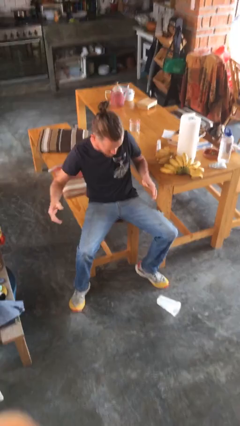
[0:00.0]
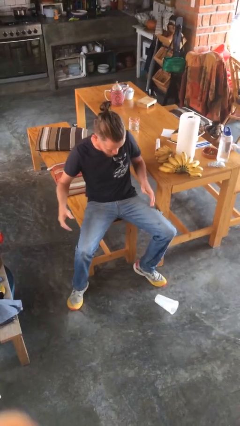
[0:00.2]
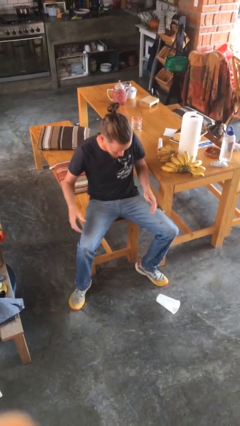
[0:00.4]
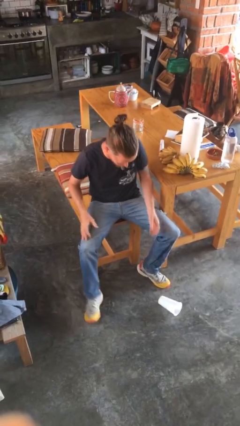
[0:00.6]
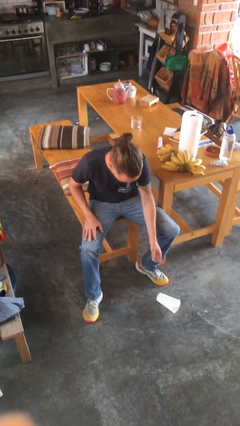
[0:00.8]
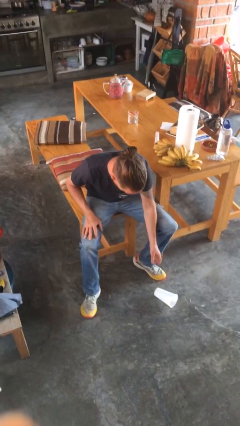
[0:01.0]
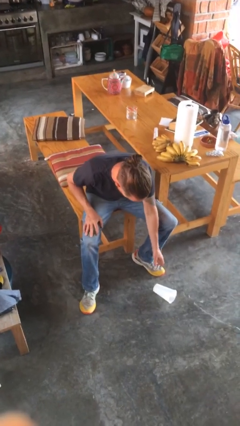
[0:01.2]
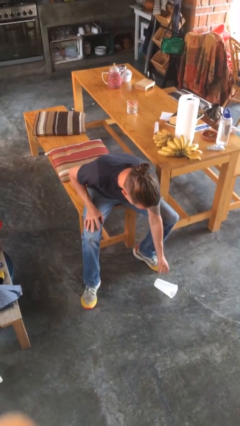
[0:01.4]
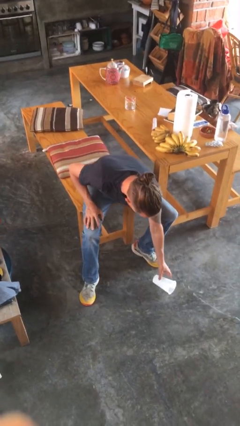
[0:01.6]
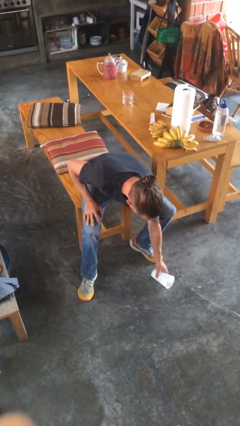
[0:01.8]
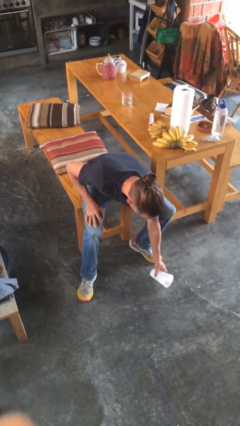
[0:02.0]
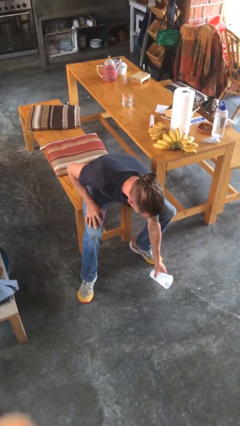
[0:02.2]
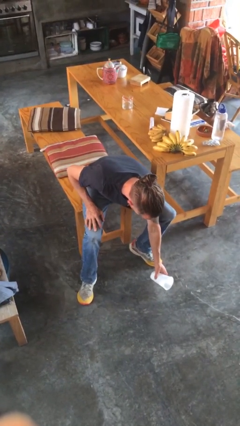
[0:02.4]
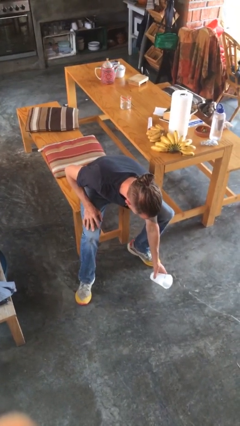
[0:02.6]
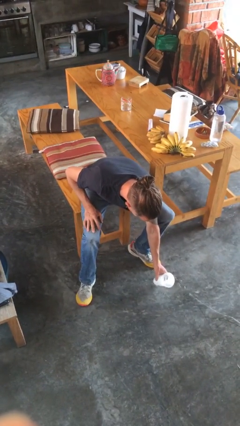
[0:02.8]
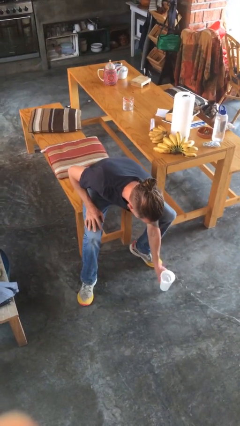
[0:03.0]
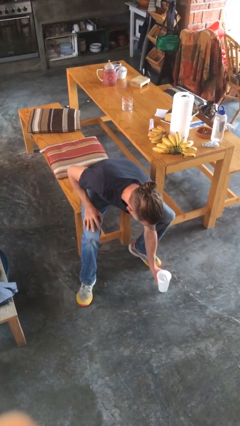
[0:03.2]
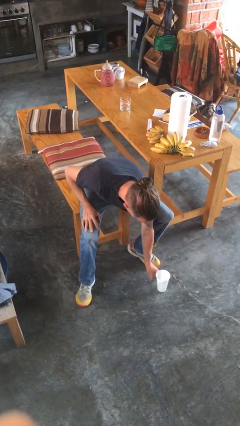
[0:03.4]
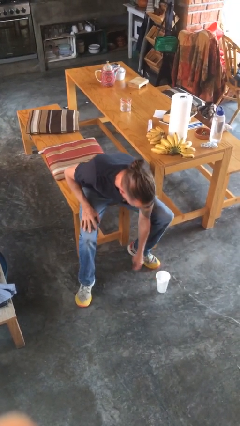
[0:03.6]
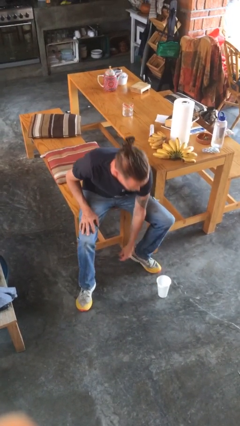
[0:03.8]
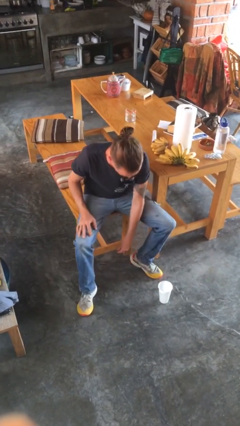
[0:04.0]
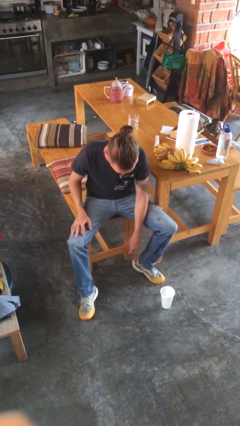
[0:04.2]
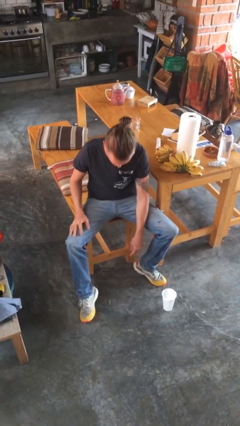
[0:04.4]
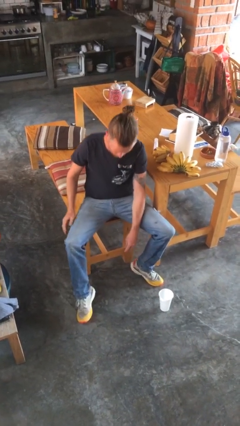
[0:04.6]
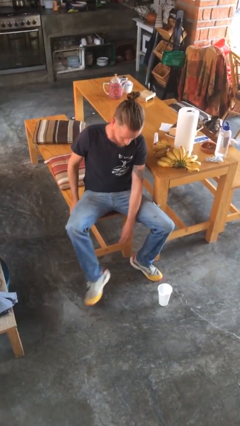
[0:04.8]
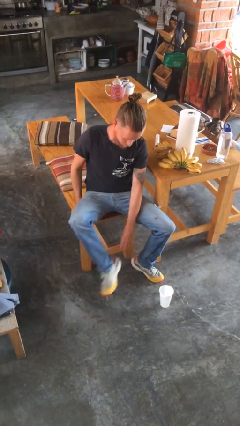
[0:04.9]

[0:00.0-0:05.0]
person sets upright glass

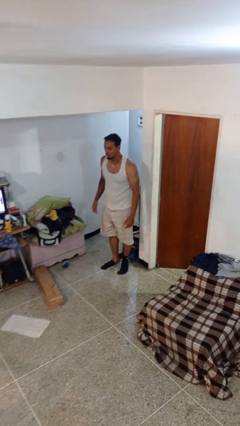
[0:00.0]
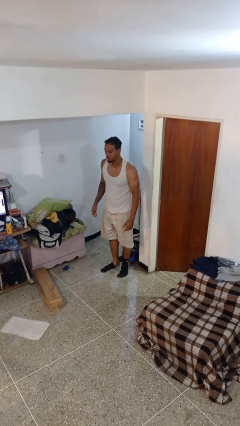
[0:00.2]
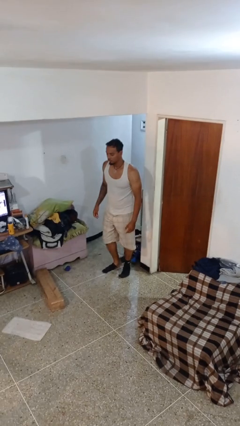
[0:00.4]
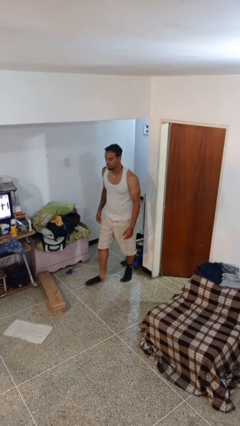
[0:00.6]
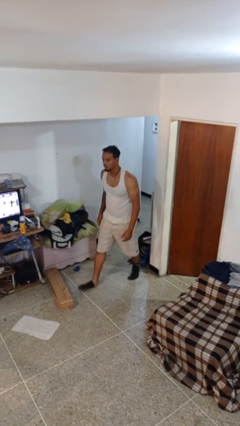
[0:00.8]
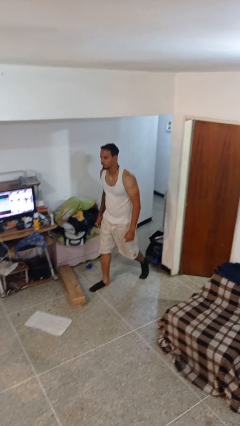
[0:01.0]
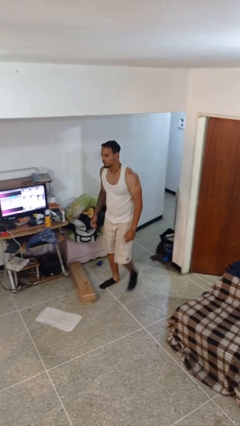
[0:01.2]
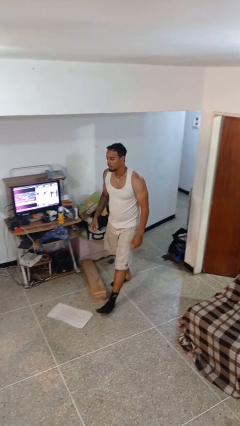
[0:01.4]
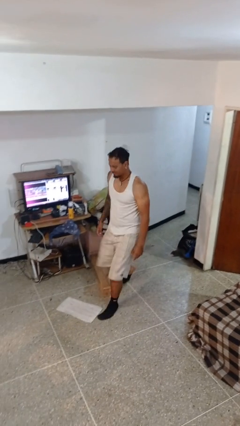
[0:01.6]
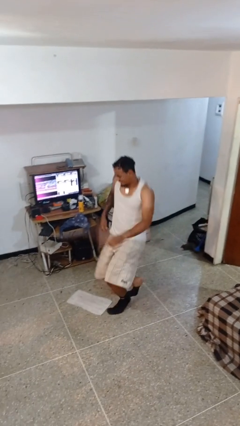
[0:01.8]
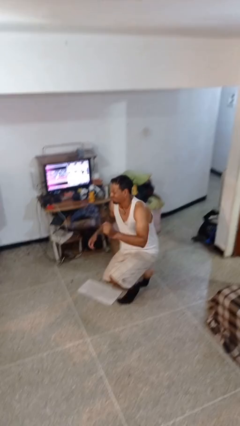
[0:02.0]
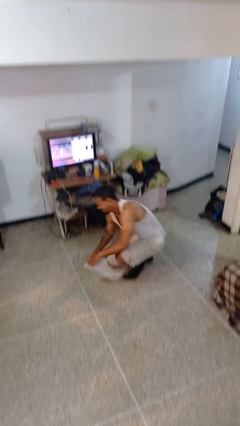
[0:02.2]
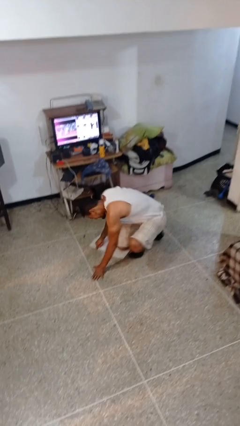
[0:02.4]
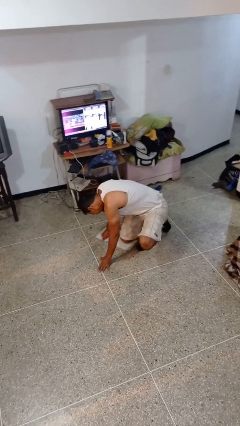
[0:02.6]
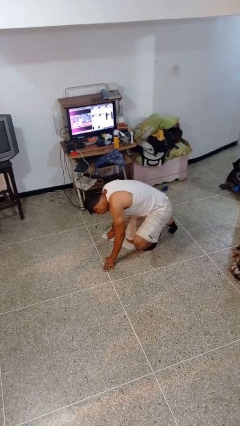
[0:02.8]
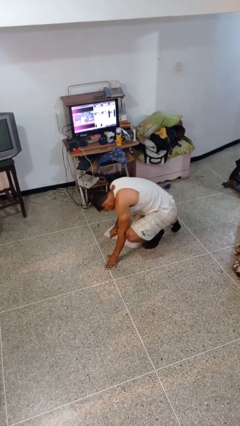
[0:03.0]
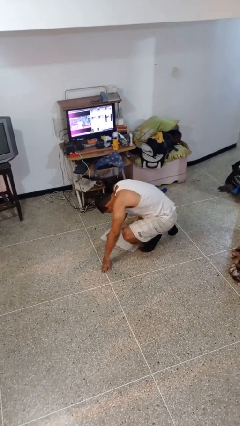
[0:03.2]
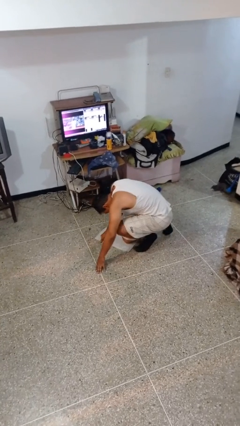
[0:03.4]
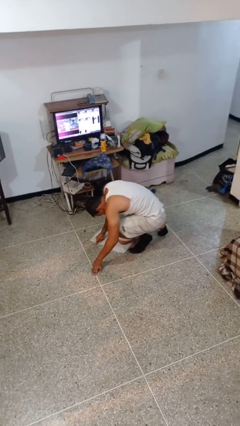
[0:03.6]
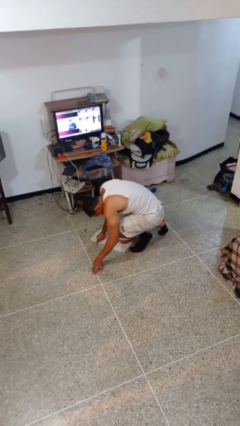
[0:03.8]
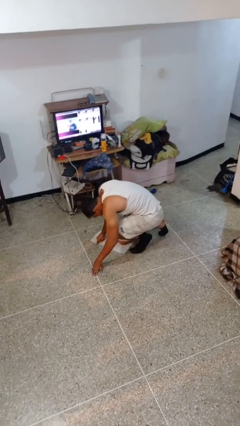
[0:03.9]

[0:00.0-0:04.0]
person trips on object on floor

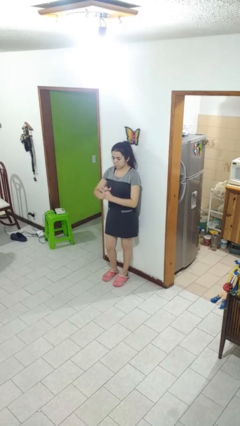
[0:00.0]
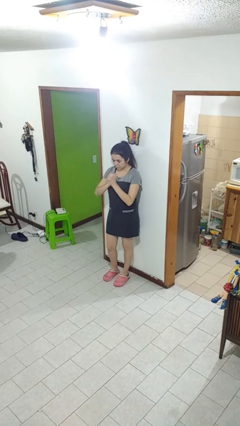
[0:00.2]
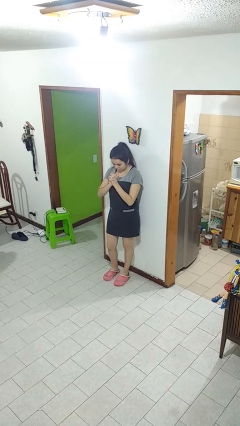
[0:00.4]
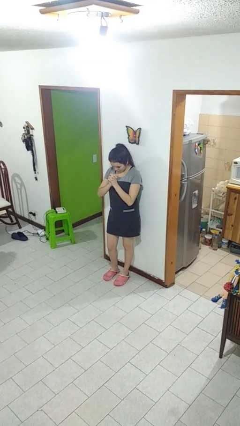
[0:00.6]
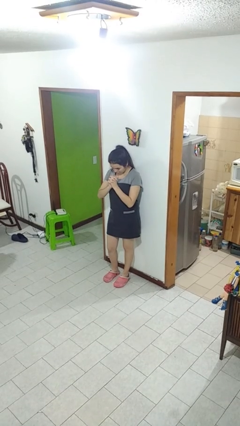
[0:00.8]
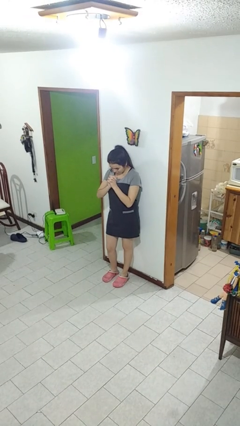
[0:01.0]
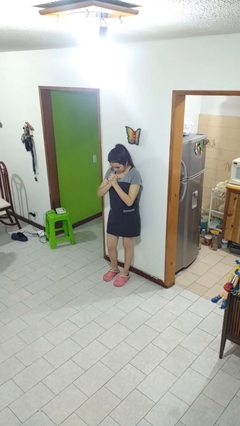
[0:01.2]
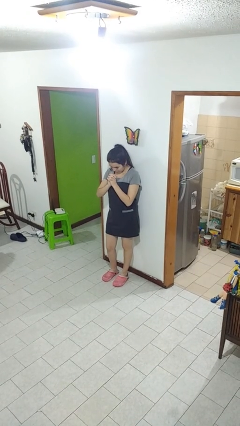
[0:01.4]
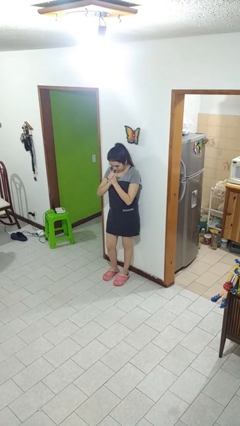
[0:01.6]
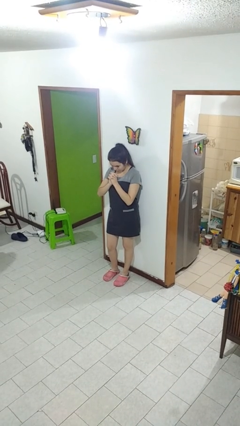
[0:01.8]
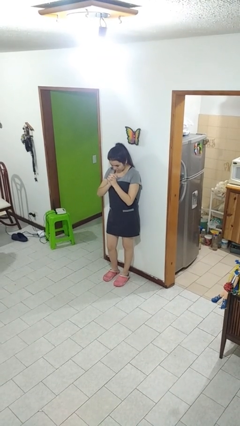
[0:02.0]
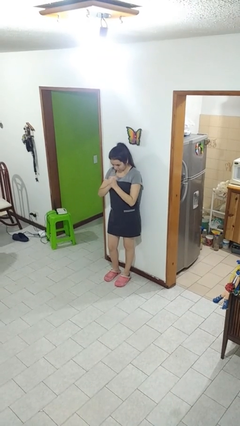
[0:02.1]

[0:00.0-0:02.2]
person prays

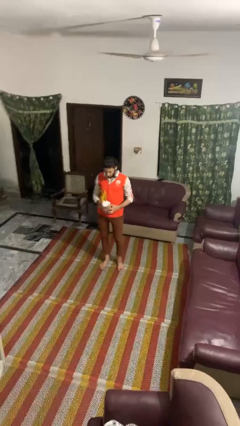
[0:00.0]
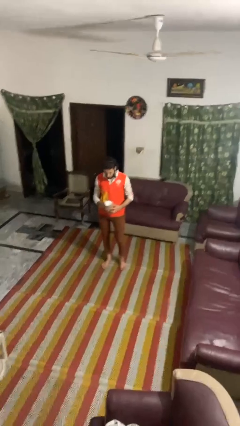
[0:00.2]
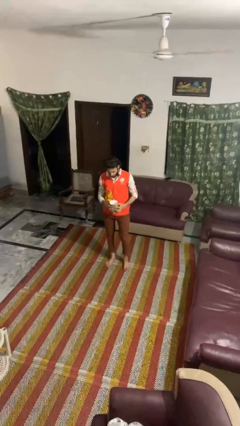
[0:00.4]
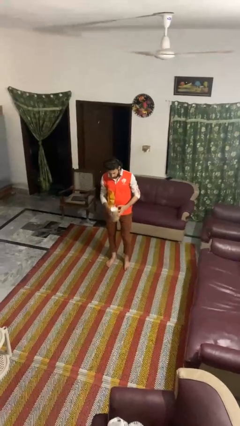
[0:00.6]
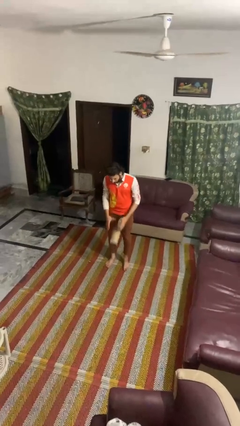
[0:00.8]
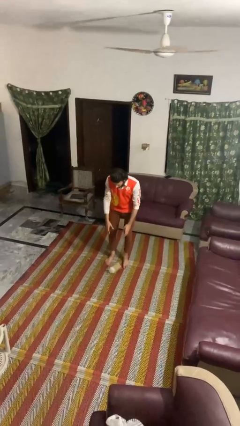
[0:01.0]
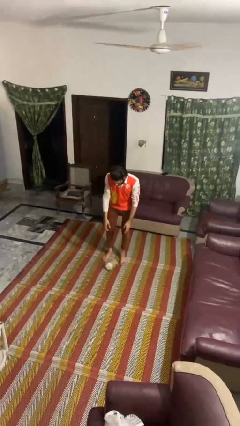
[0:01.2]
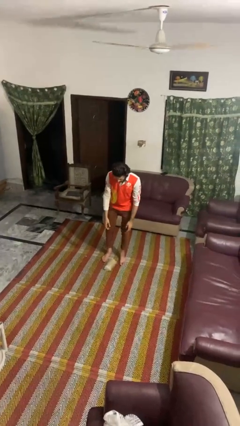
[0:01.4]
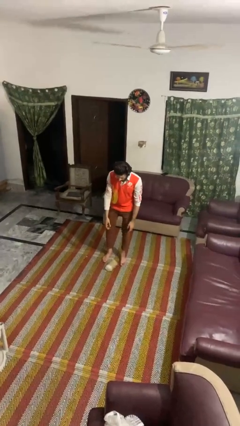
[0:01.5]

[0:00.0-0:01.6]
person drops object

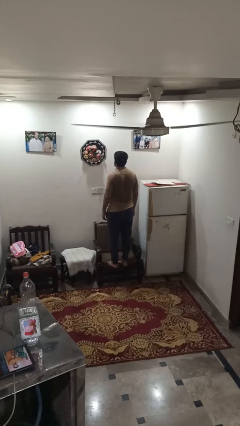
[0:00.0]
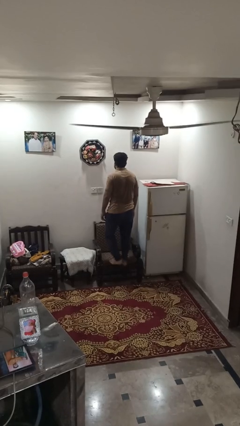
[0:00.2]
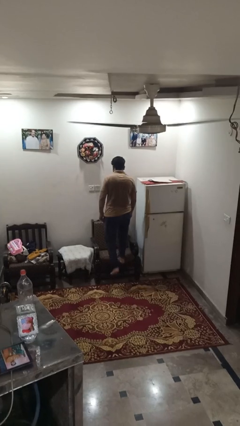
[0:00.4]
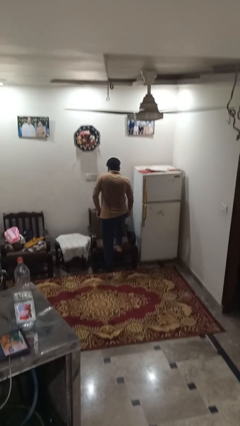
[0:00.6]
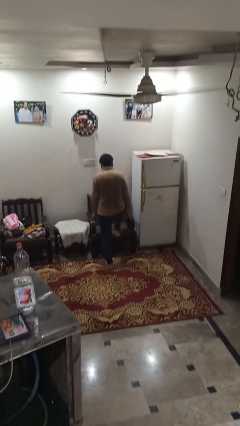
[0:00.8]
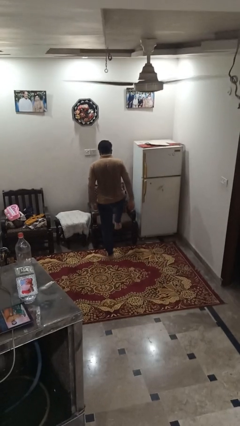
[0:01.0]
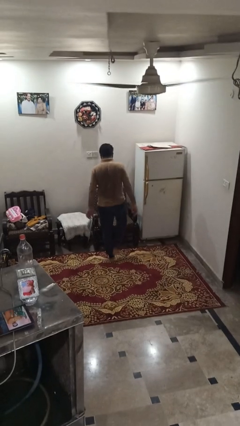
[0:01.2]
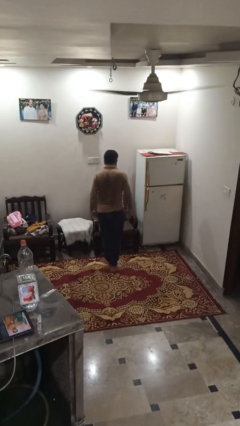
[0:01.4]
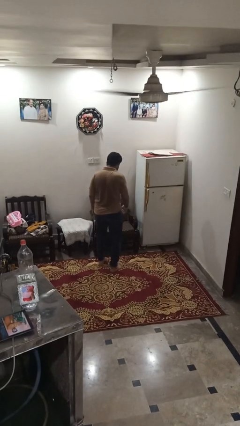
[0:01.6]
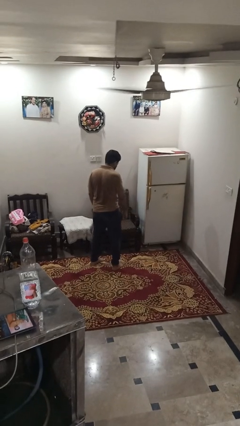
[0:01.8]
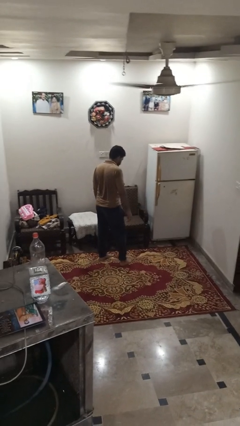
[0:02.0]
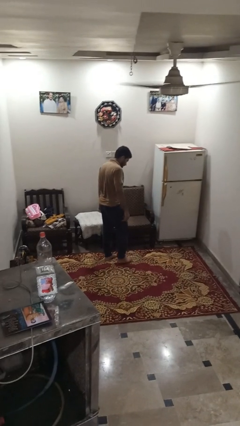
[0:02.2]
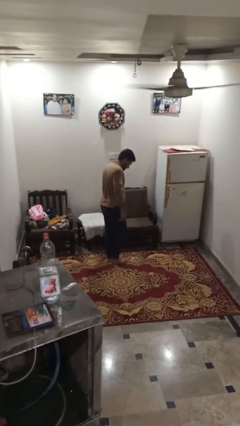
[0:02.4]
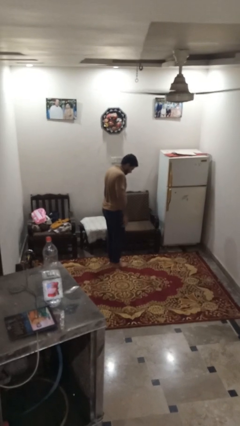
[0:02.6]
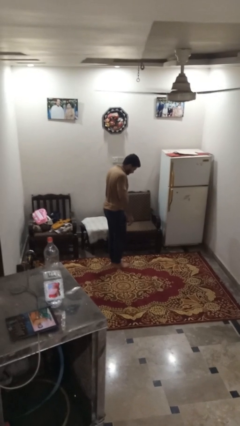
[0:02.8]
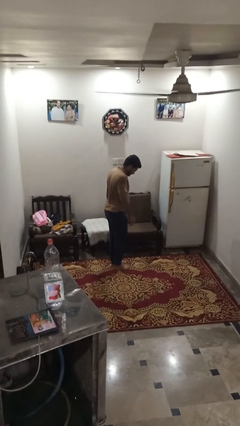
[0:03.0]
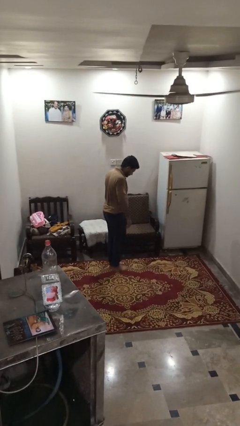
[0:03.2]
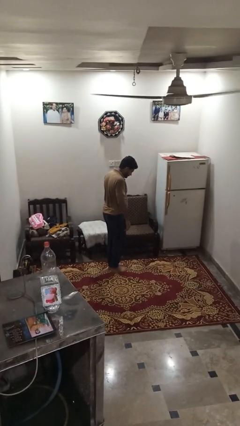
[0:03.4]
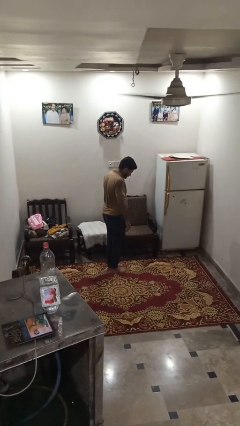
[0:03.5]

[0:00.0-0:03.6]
person climbs off couch

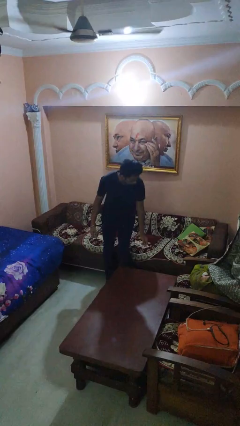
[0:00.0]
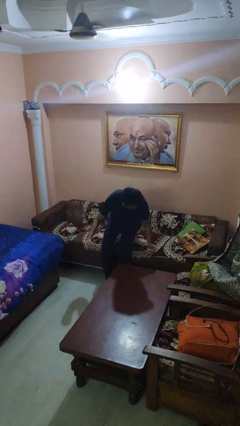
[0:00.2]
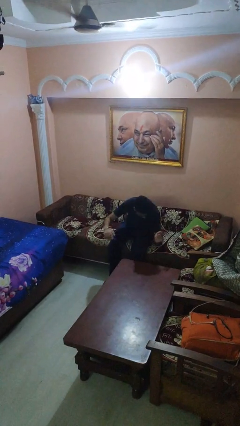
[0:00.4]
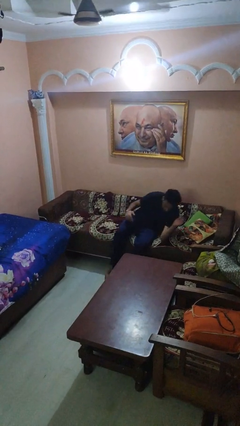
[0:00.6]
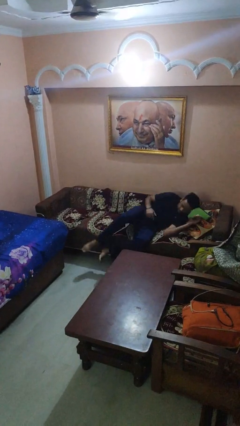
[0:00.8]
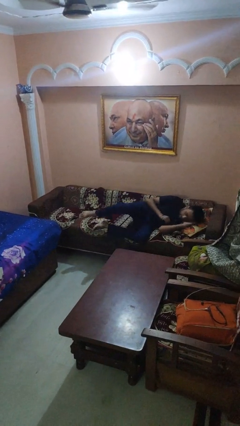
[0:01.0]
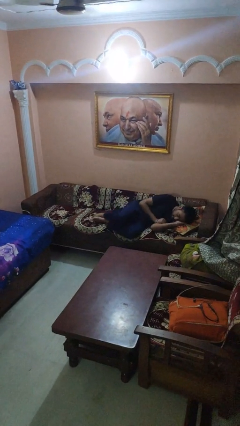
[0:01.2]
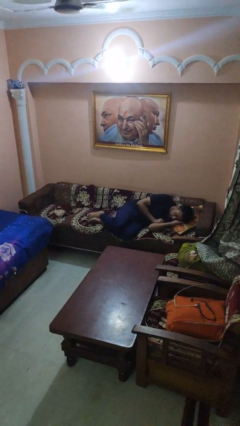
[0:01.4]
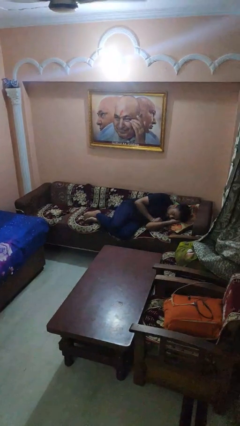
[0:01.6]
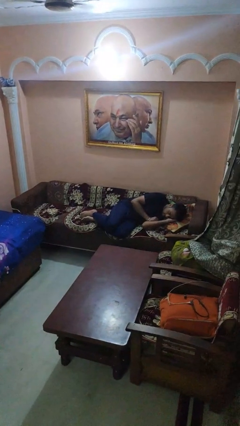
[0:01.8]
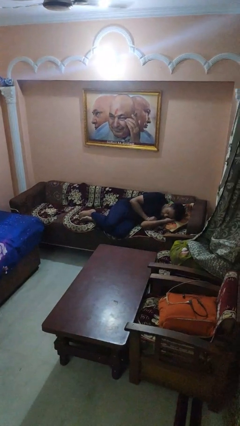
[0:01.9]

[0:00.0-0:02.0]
person lies down on couch
